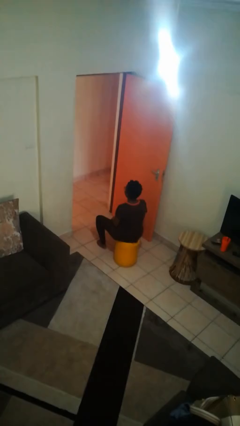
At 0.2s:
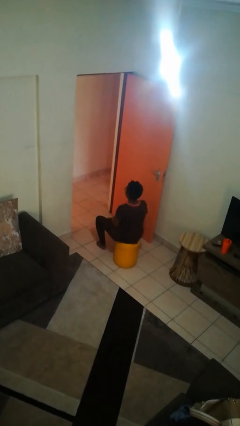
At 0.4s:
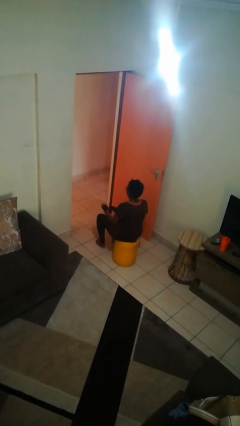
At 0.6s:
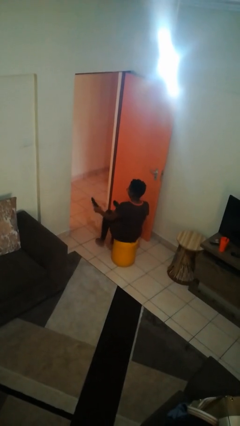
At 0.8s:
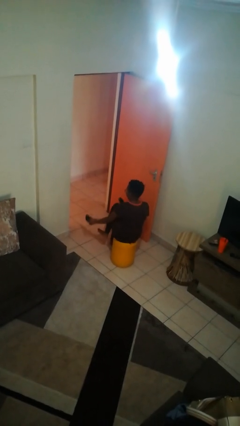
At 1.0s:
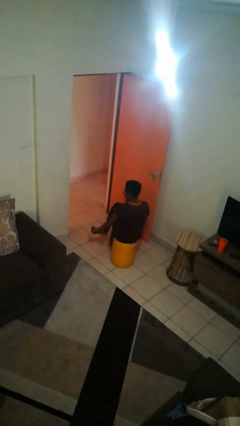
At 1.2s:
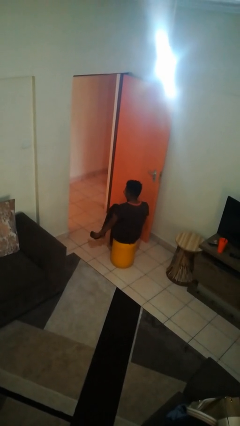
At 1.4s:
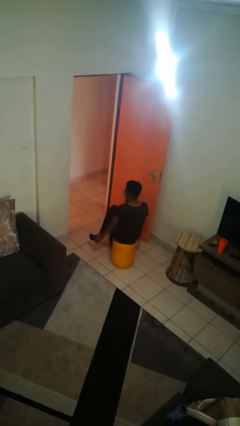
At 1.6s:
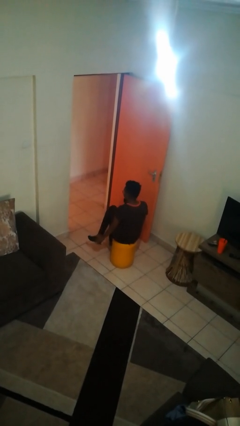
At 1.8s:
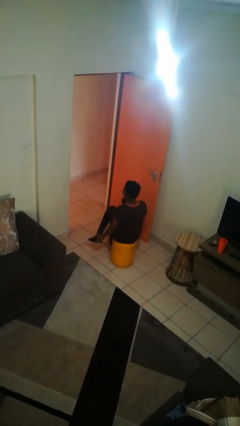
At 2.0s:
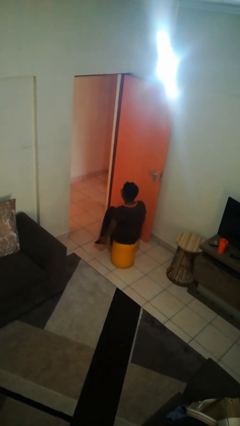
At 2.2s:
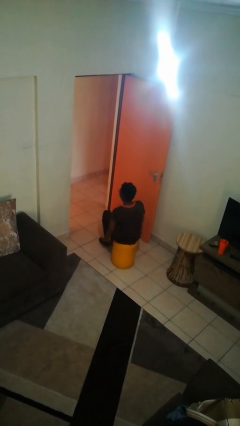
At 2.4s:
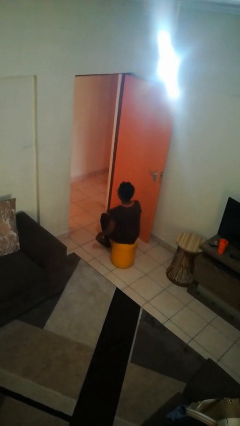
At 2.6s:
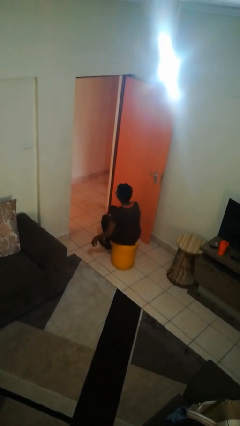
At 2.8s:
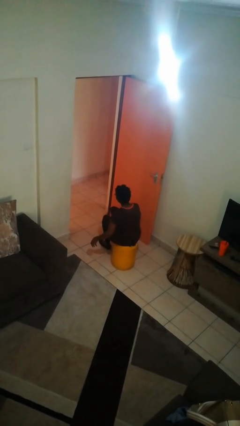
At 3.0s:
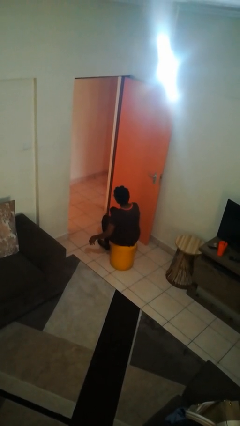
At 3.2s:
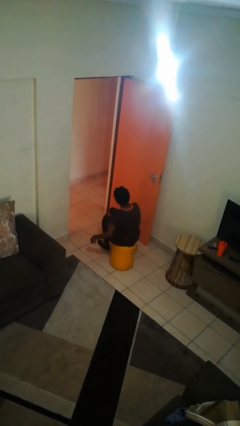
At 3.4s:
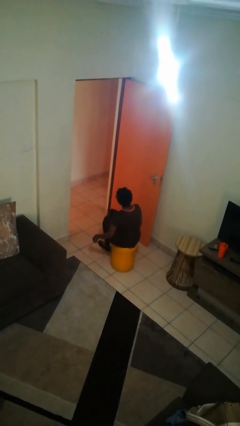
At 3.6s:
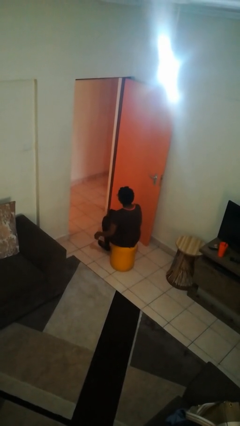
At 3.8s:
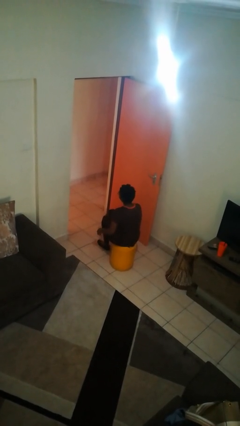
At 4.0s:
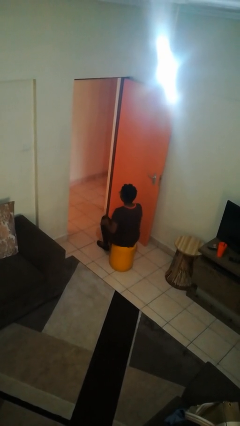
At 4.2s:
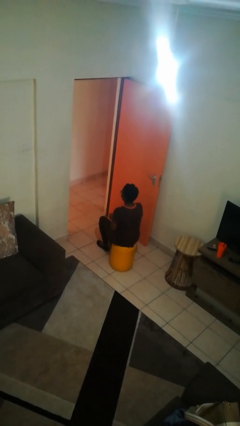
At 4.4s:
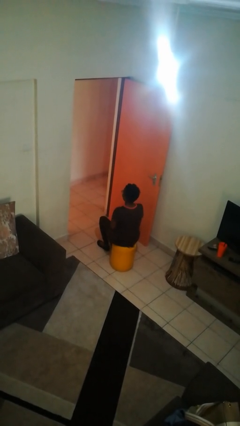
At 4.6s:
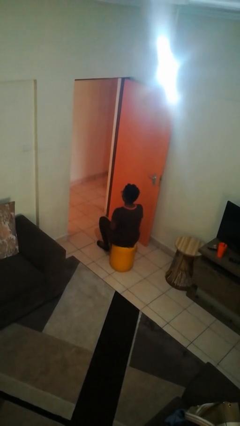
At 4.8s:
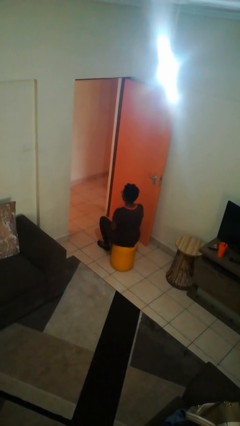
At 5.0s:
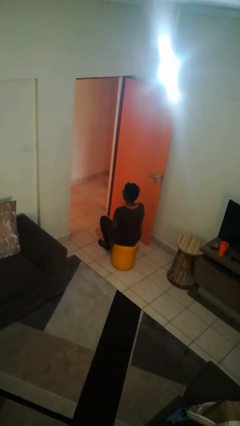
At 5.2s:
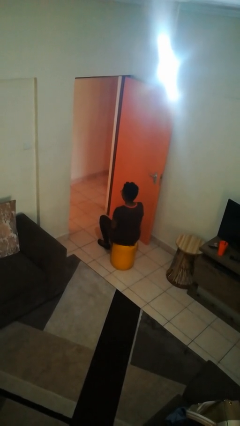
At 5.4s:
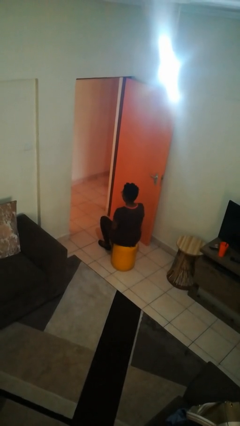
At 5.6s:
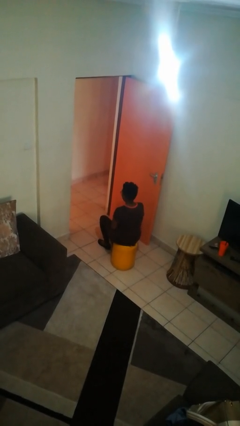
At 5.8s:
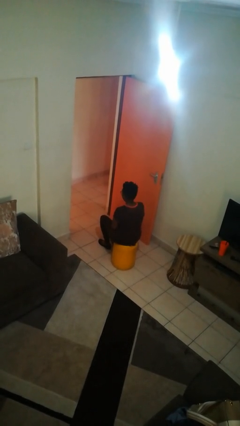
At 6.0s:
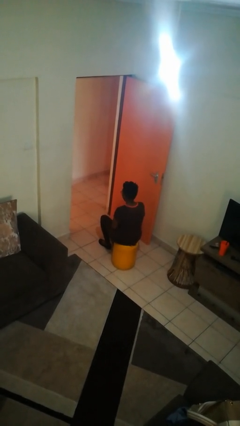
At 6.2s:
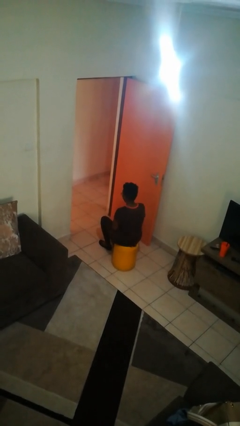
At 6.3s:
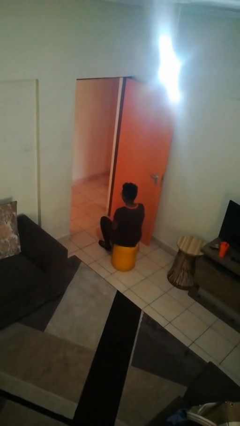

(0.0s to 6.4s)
person puts on shoes

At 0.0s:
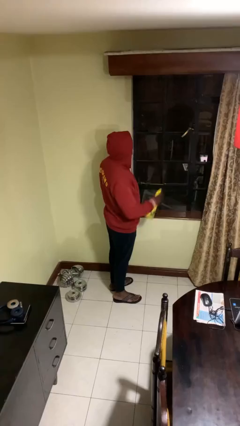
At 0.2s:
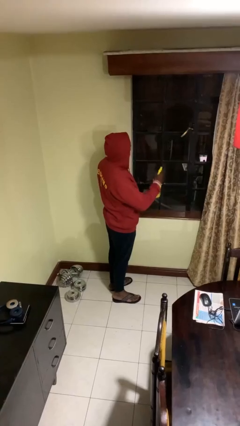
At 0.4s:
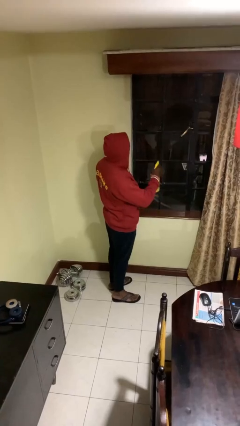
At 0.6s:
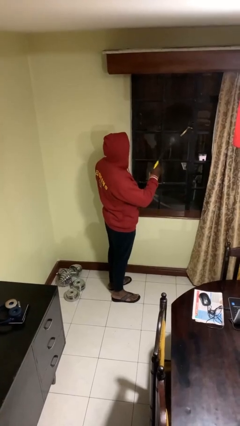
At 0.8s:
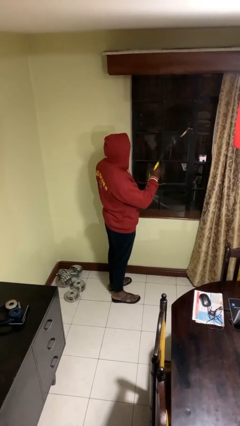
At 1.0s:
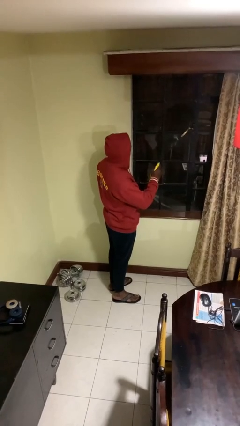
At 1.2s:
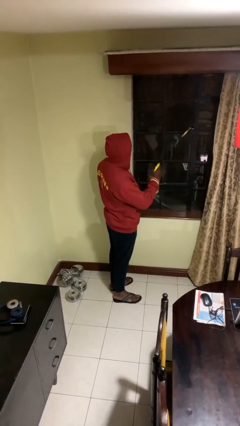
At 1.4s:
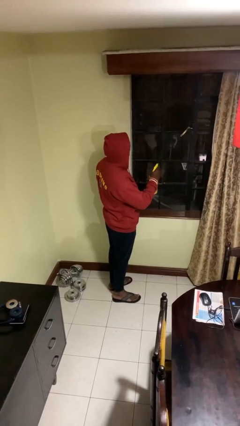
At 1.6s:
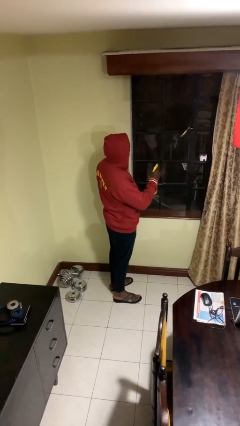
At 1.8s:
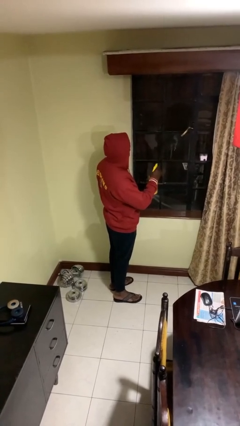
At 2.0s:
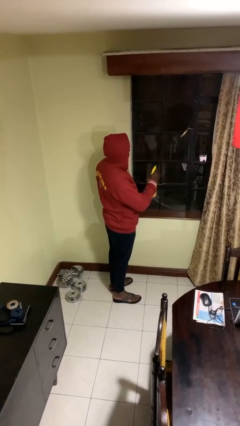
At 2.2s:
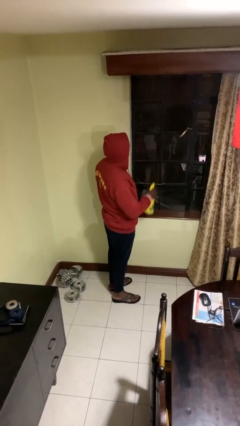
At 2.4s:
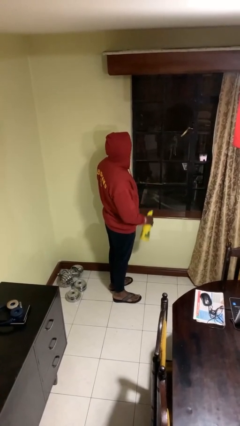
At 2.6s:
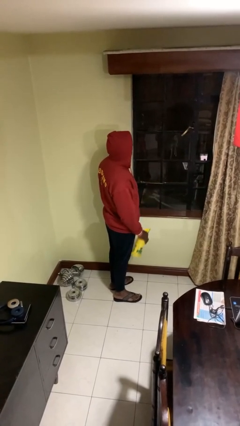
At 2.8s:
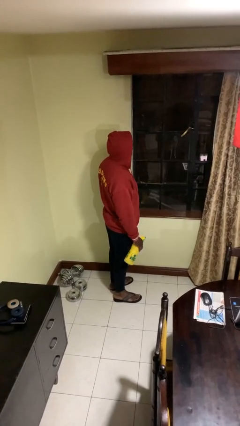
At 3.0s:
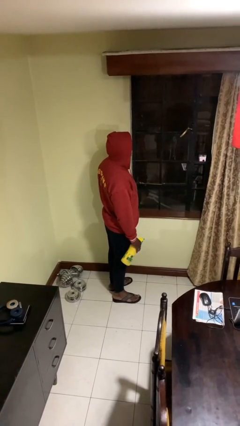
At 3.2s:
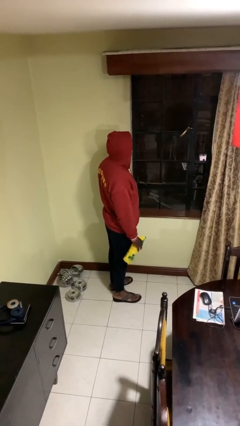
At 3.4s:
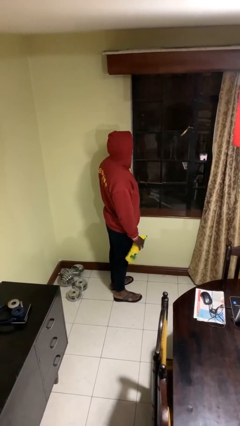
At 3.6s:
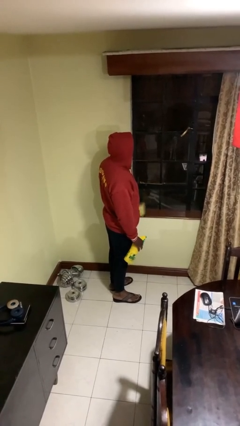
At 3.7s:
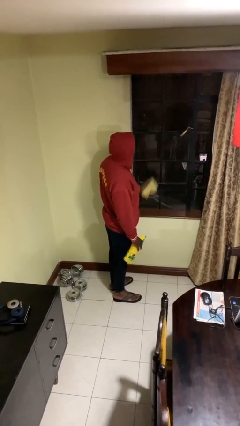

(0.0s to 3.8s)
person sprays from bottle

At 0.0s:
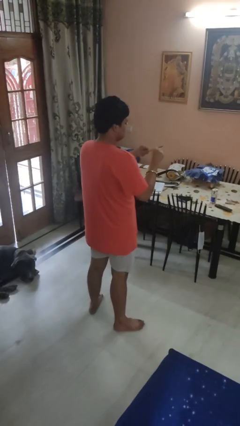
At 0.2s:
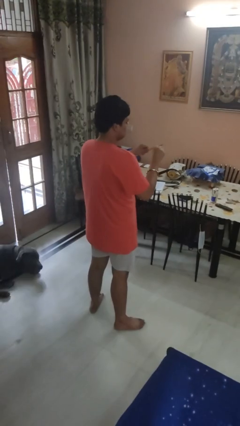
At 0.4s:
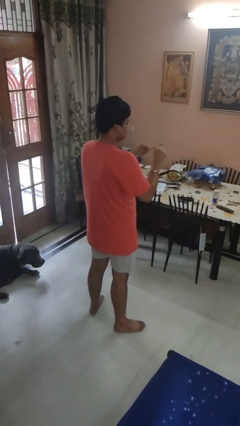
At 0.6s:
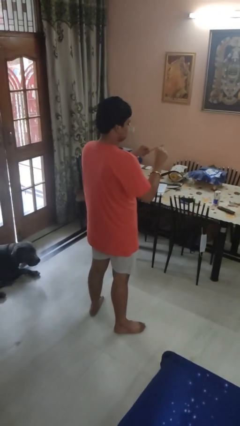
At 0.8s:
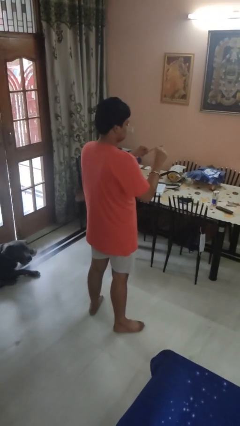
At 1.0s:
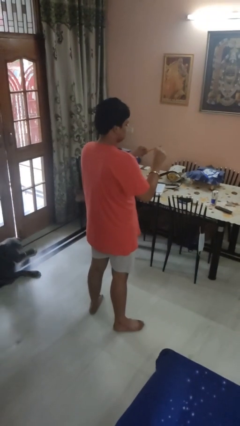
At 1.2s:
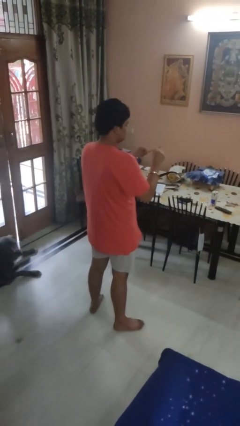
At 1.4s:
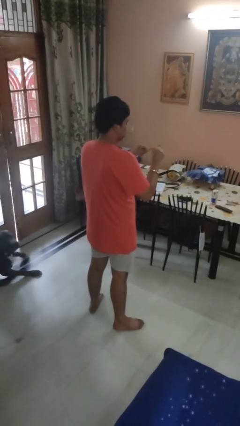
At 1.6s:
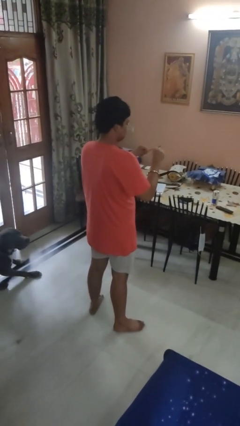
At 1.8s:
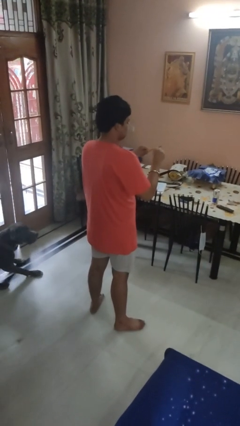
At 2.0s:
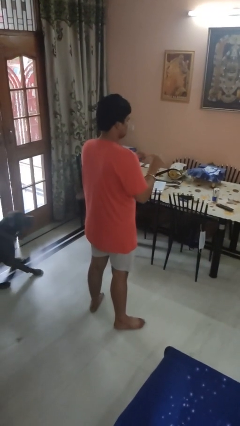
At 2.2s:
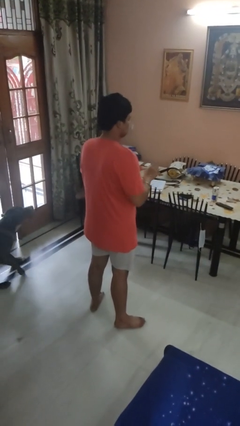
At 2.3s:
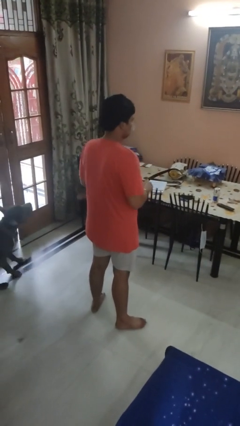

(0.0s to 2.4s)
person files fingernails

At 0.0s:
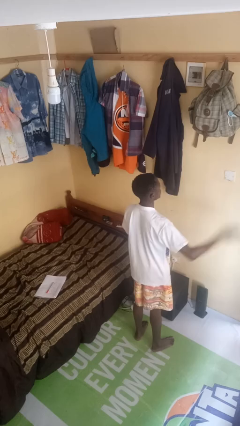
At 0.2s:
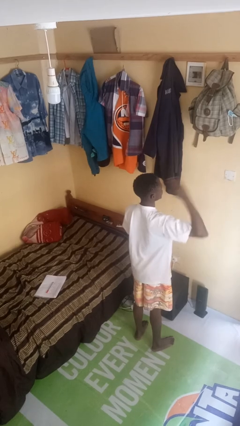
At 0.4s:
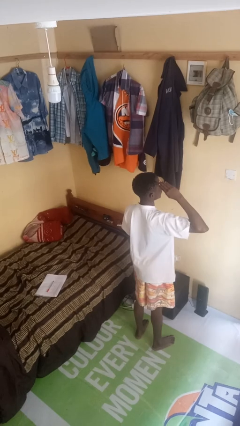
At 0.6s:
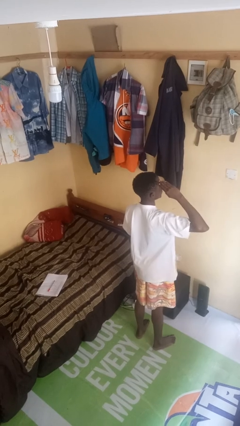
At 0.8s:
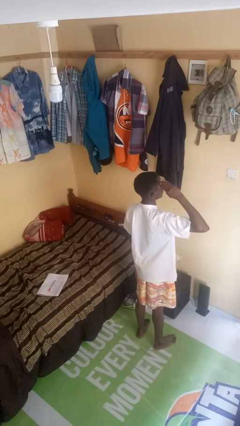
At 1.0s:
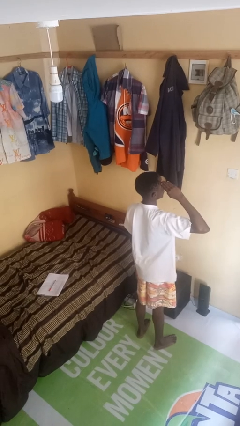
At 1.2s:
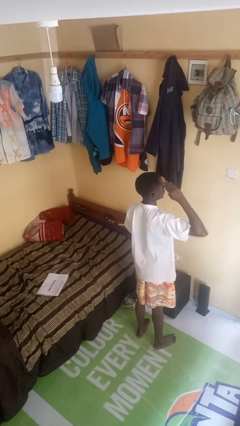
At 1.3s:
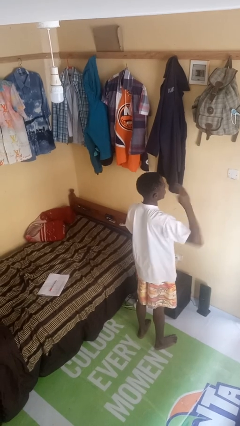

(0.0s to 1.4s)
person salutes

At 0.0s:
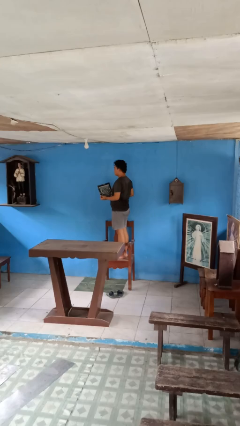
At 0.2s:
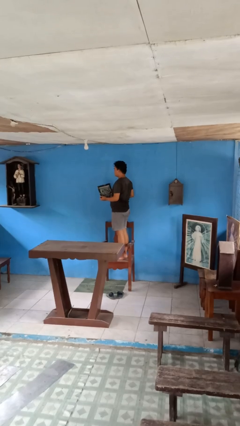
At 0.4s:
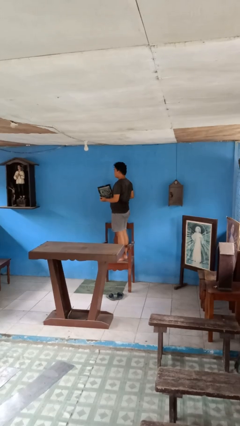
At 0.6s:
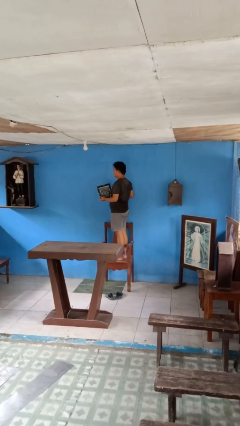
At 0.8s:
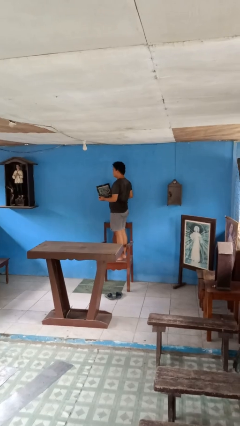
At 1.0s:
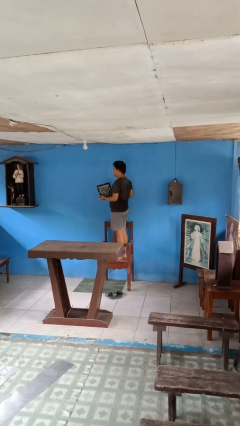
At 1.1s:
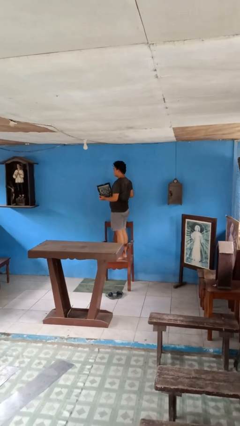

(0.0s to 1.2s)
person takes down picture frame

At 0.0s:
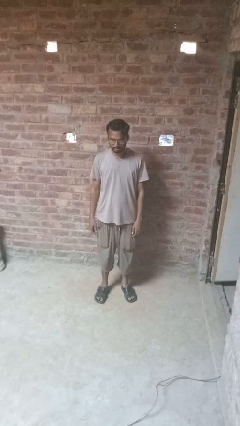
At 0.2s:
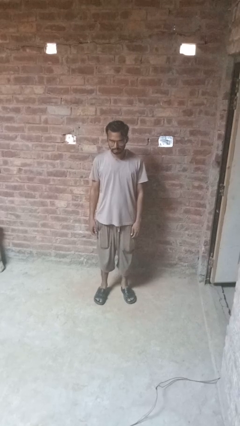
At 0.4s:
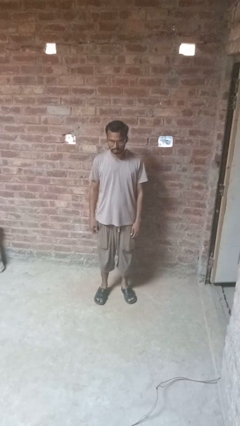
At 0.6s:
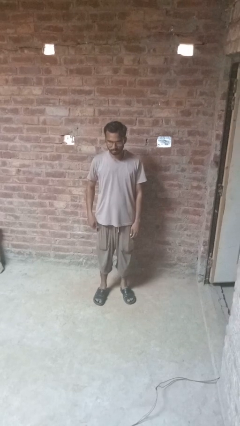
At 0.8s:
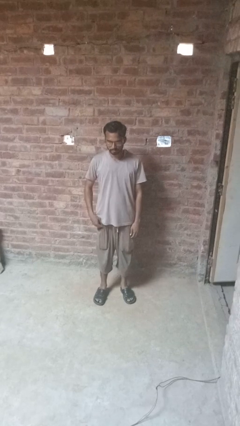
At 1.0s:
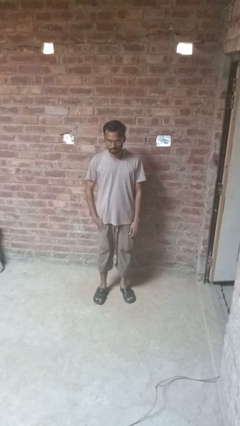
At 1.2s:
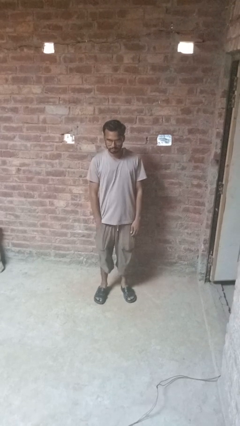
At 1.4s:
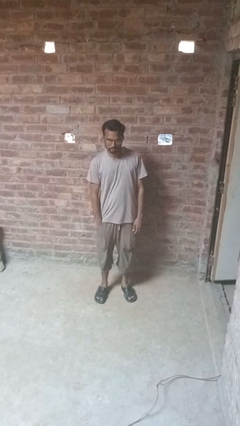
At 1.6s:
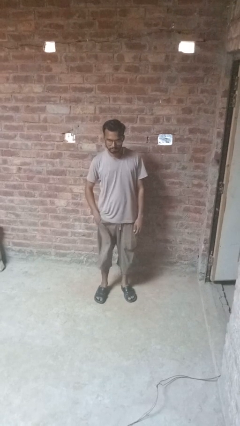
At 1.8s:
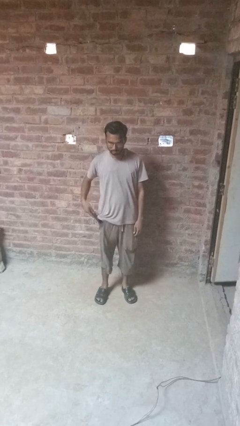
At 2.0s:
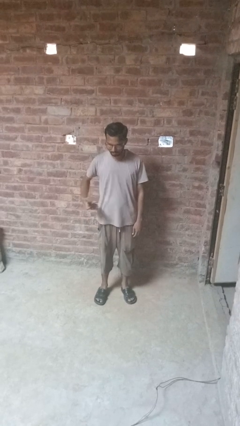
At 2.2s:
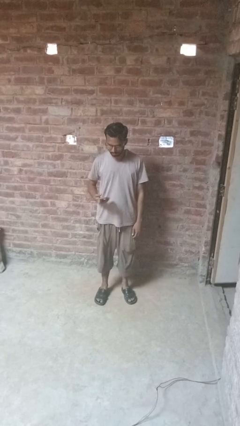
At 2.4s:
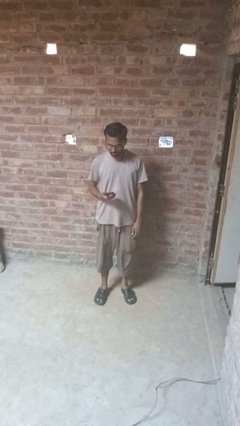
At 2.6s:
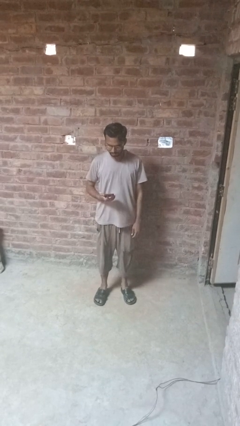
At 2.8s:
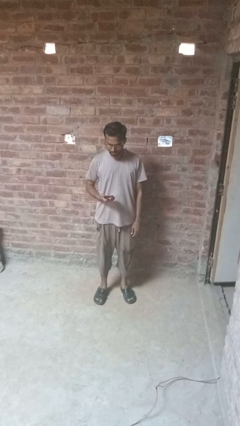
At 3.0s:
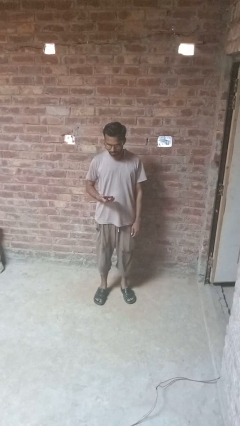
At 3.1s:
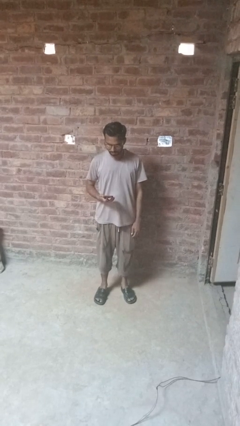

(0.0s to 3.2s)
person takes phone from pocket
